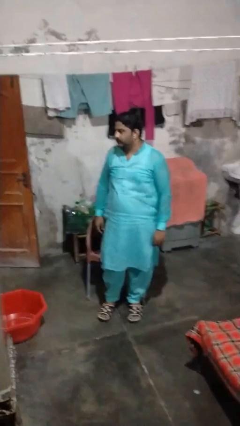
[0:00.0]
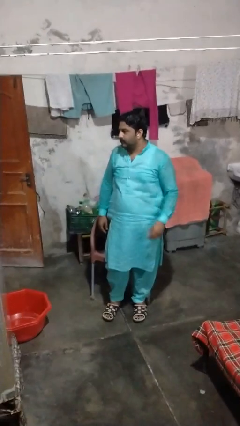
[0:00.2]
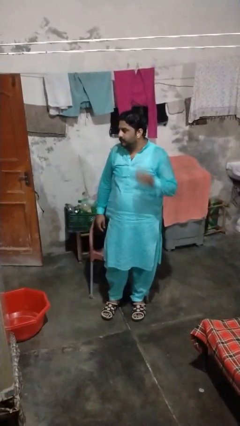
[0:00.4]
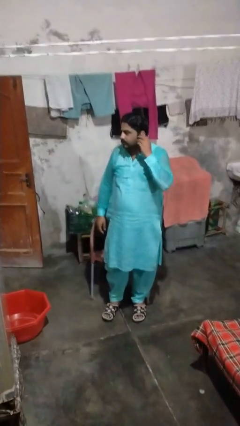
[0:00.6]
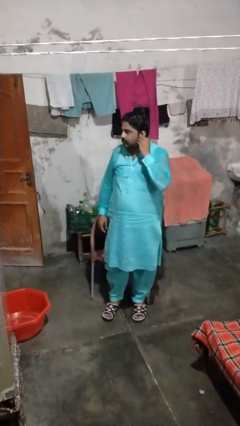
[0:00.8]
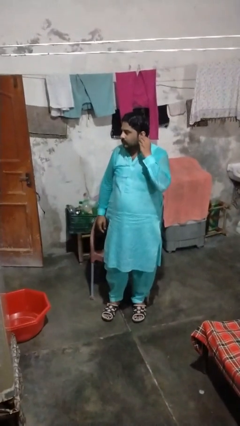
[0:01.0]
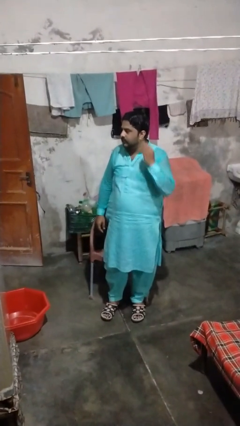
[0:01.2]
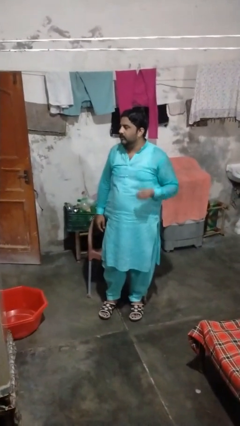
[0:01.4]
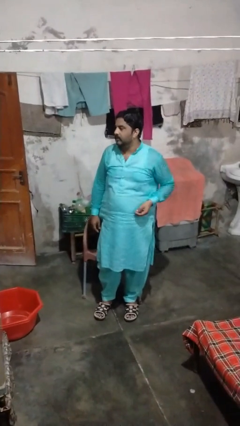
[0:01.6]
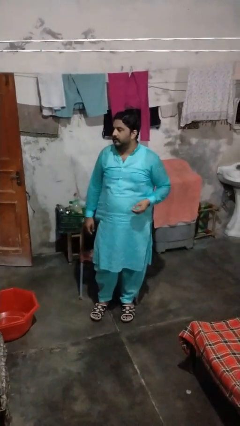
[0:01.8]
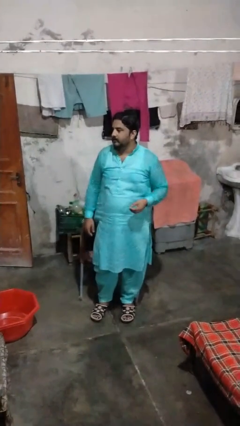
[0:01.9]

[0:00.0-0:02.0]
person takes off earrings

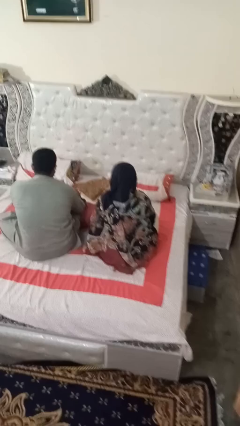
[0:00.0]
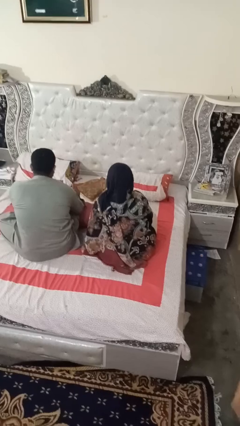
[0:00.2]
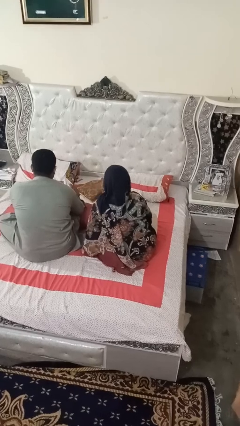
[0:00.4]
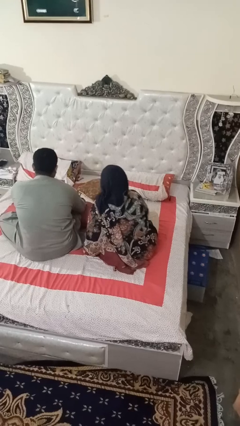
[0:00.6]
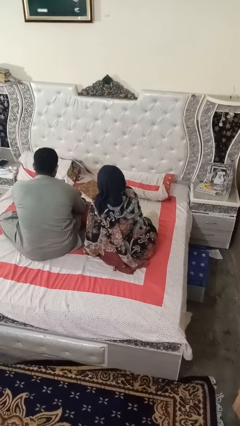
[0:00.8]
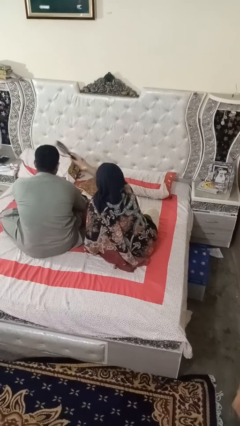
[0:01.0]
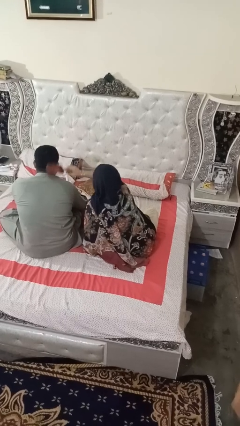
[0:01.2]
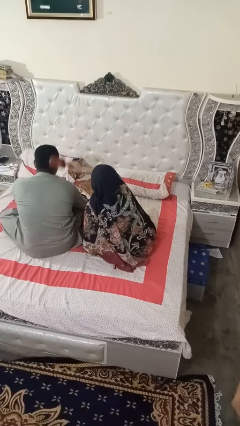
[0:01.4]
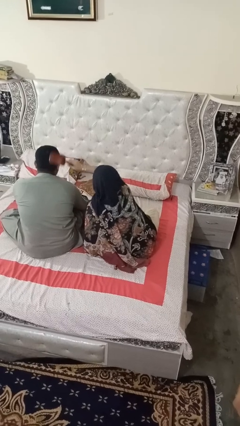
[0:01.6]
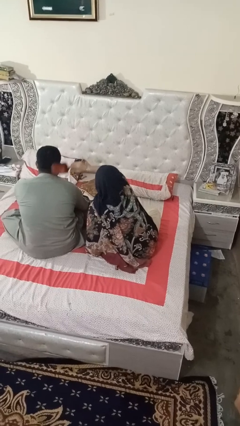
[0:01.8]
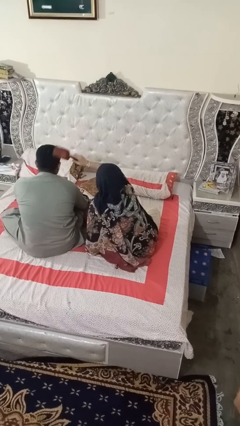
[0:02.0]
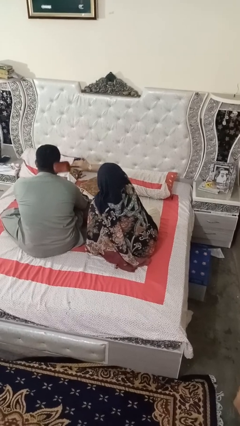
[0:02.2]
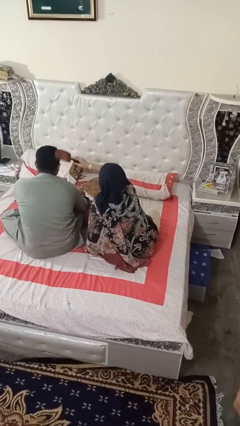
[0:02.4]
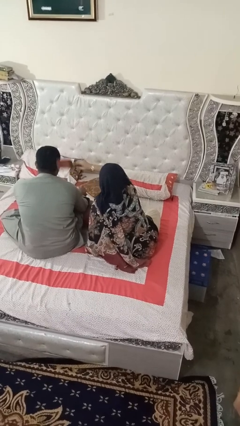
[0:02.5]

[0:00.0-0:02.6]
person brushes hair of person

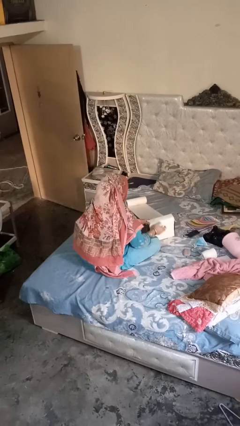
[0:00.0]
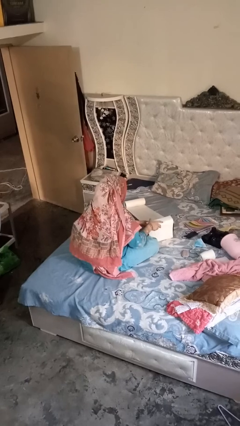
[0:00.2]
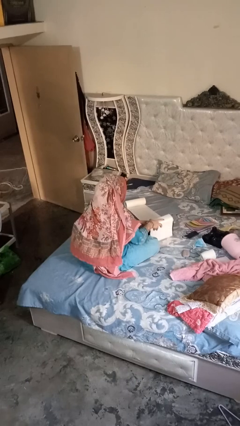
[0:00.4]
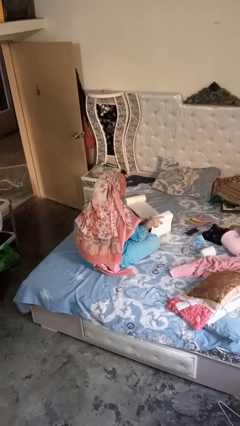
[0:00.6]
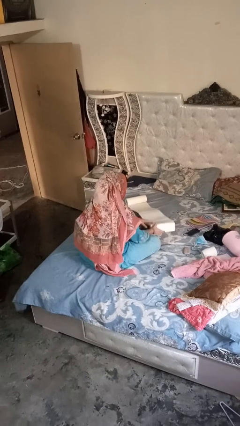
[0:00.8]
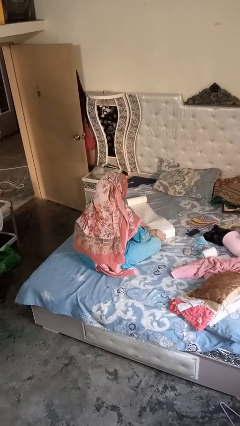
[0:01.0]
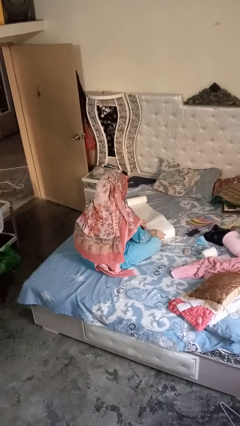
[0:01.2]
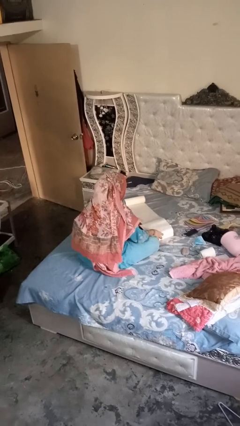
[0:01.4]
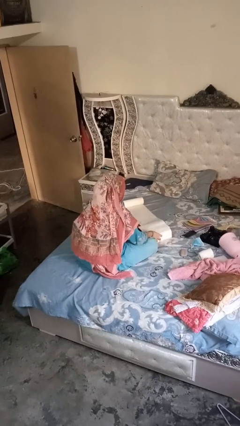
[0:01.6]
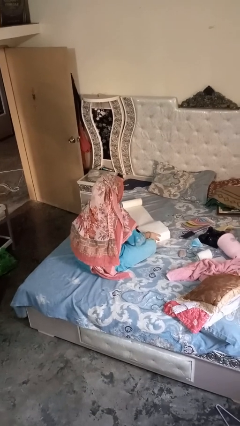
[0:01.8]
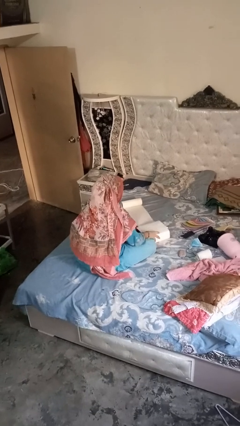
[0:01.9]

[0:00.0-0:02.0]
person wraps box

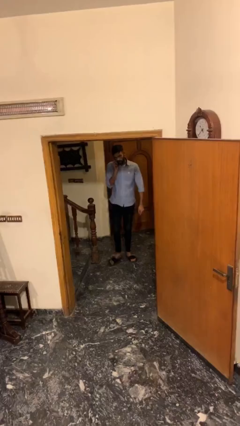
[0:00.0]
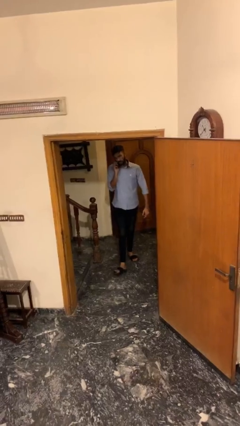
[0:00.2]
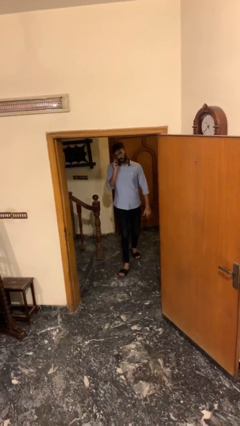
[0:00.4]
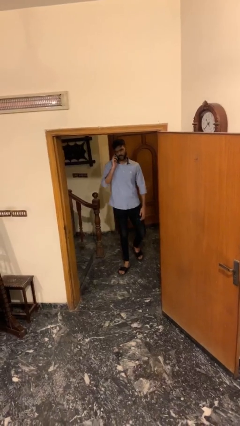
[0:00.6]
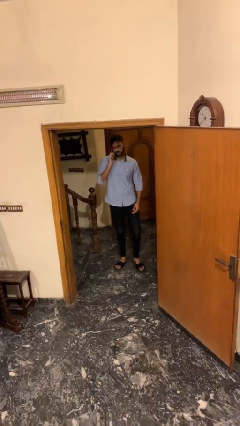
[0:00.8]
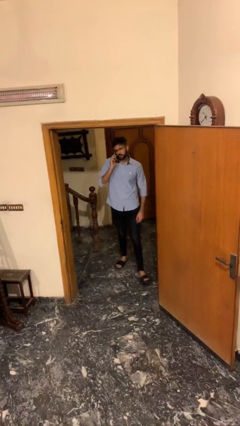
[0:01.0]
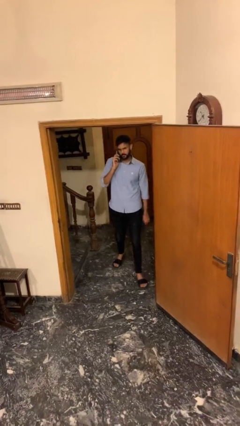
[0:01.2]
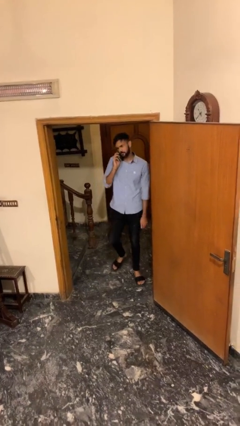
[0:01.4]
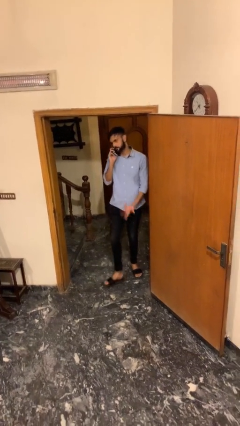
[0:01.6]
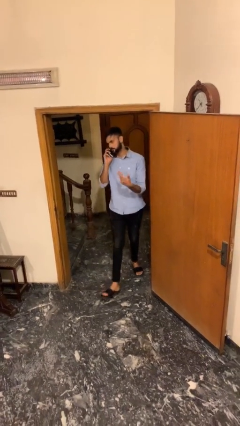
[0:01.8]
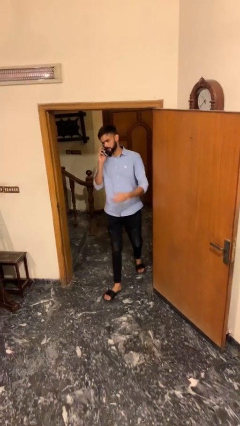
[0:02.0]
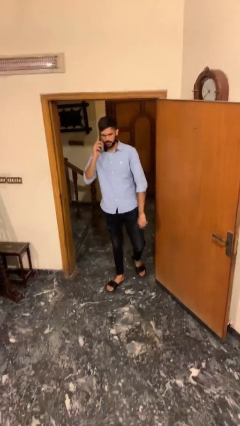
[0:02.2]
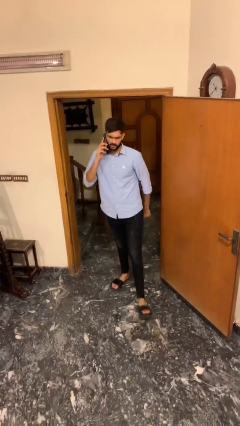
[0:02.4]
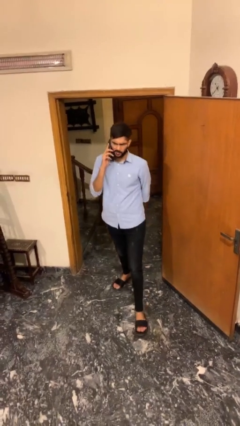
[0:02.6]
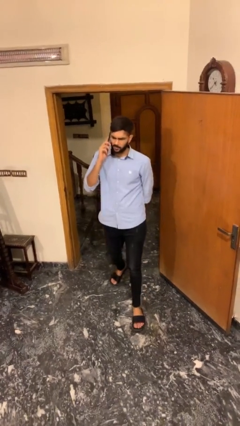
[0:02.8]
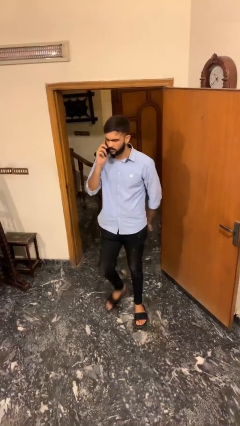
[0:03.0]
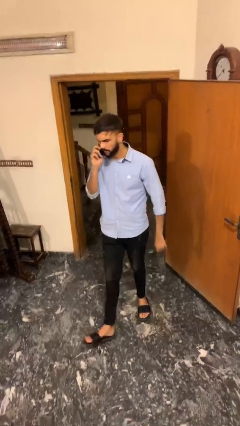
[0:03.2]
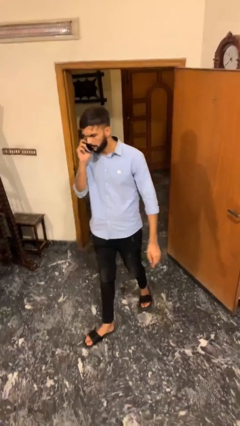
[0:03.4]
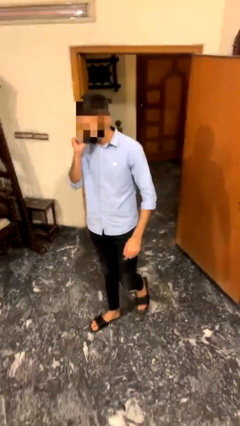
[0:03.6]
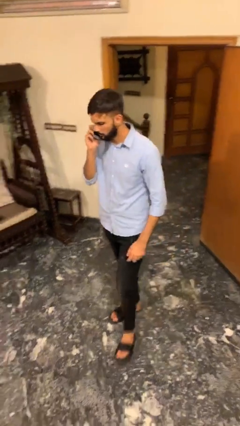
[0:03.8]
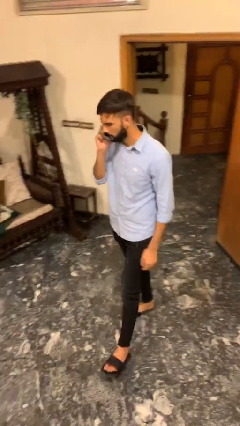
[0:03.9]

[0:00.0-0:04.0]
person enters scene through structure

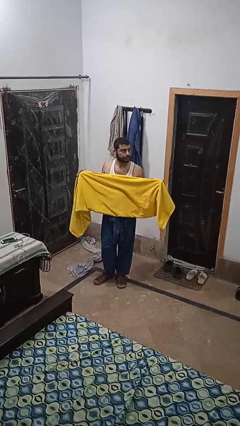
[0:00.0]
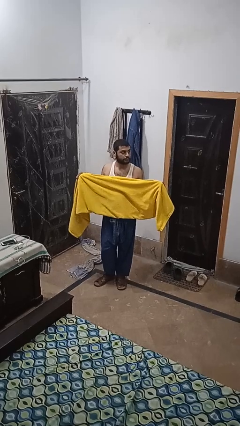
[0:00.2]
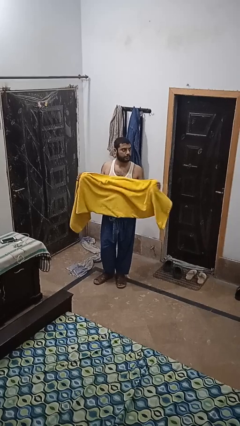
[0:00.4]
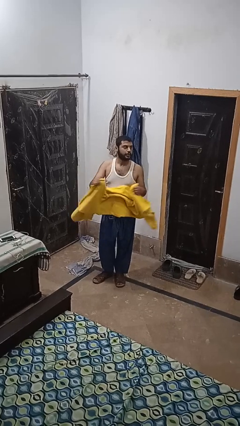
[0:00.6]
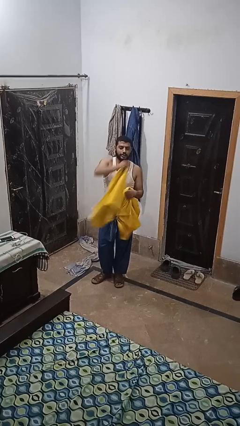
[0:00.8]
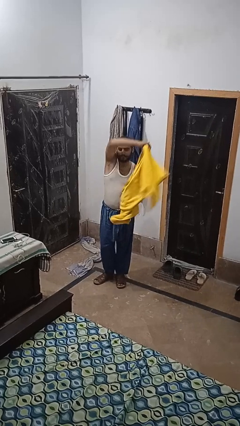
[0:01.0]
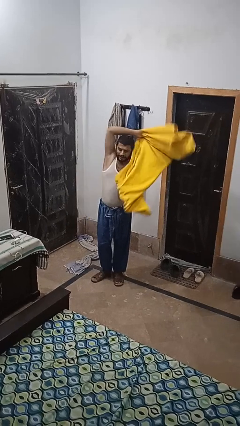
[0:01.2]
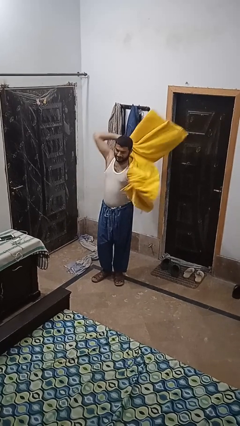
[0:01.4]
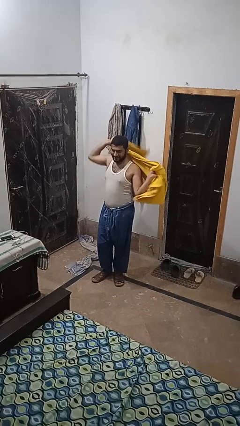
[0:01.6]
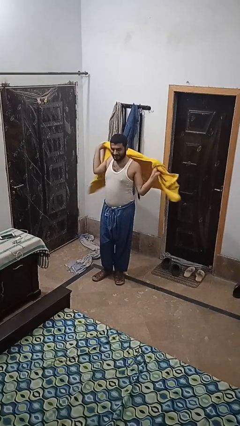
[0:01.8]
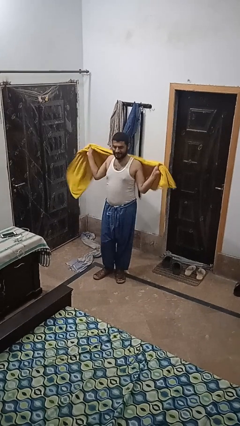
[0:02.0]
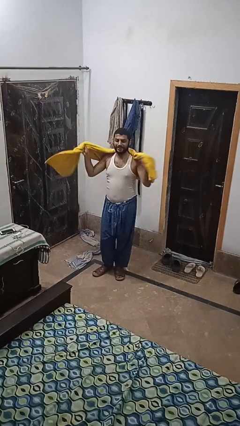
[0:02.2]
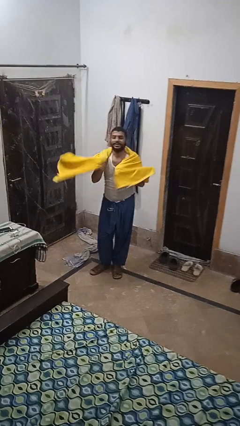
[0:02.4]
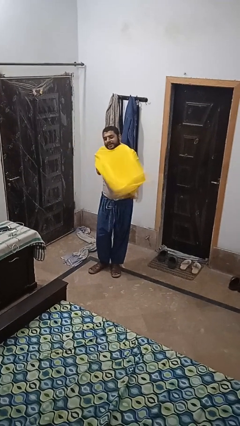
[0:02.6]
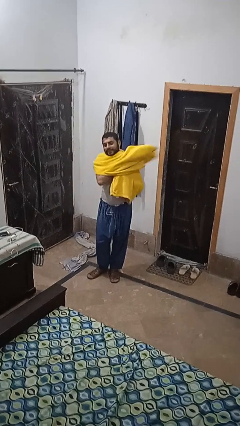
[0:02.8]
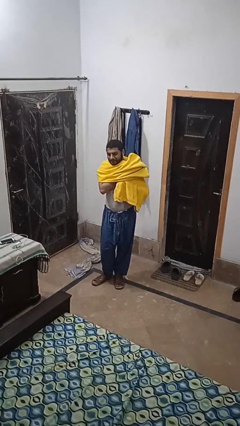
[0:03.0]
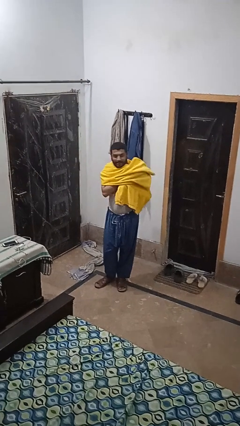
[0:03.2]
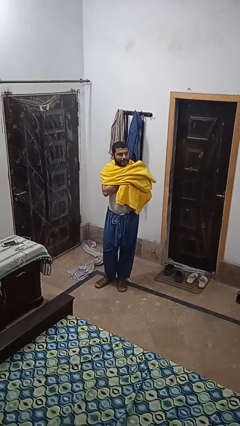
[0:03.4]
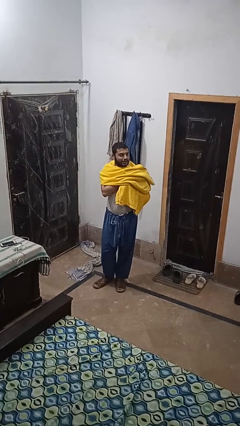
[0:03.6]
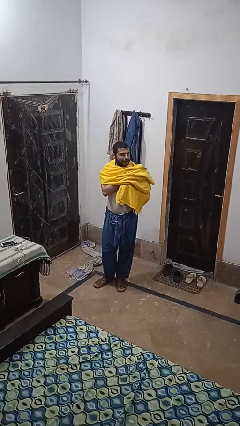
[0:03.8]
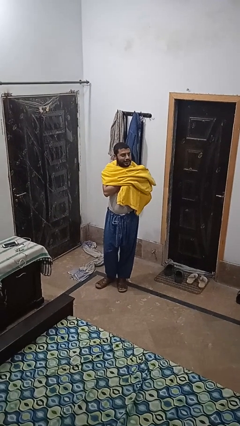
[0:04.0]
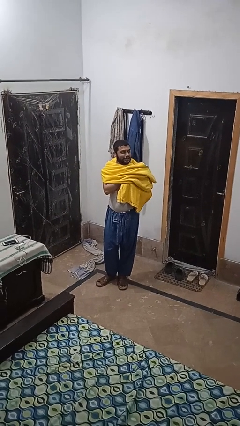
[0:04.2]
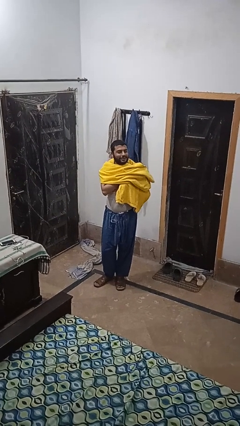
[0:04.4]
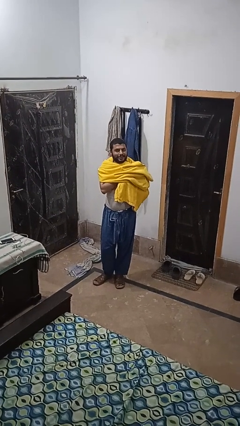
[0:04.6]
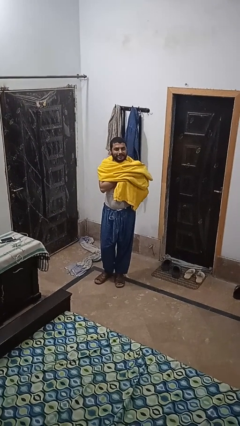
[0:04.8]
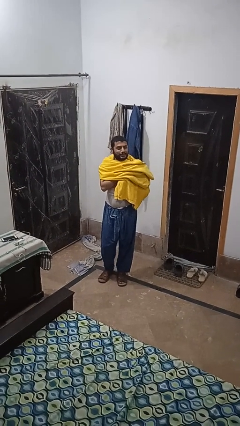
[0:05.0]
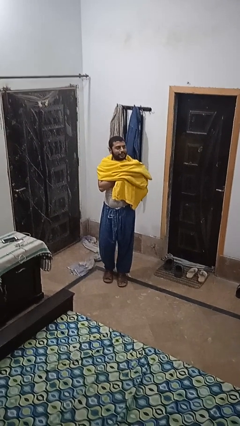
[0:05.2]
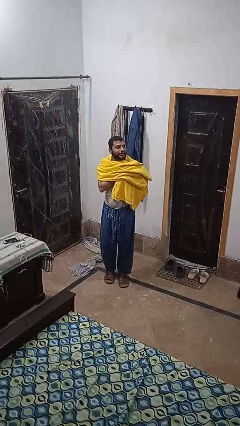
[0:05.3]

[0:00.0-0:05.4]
person puts on scarf

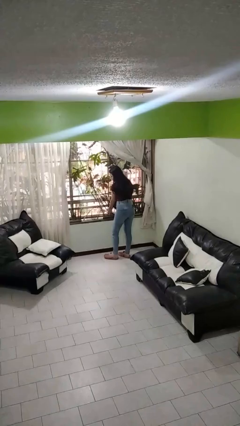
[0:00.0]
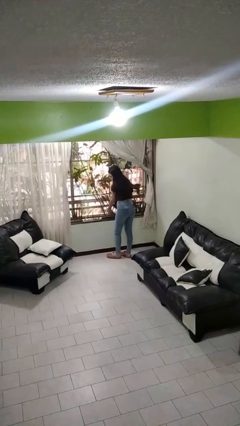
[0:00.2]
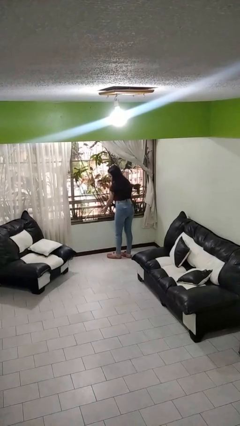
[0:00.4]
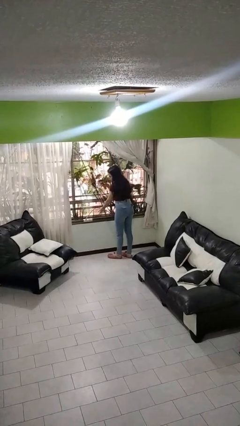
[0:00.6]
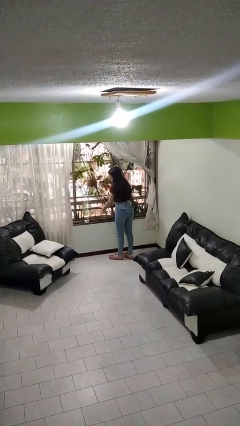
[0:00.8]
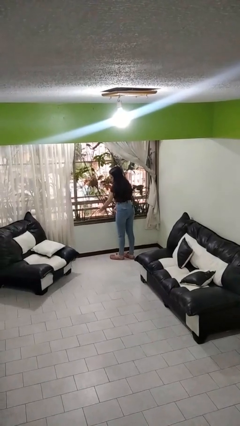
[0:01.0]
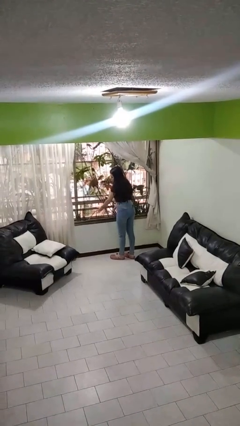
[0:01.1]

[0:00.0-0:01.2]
person closes home window

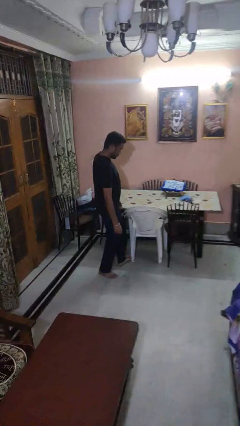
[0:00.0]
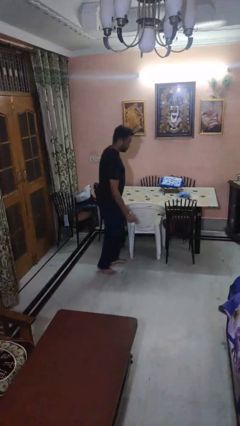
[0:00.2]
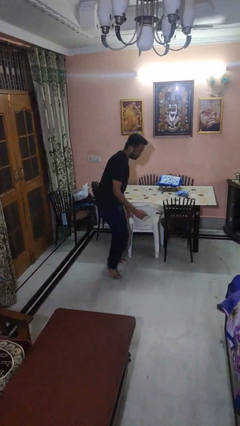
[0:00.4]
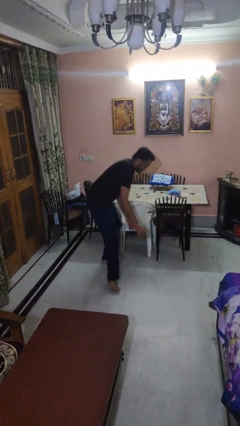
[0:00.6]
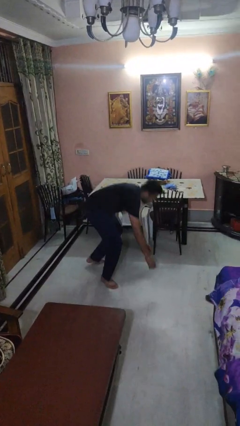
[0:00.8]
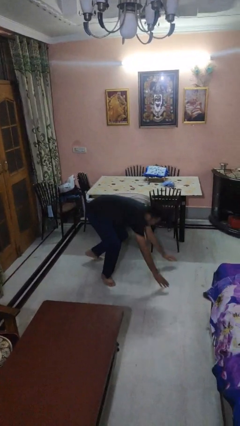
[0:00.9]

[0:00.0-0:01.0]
person trips on object on floor
